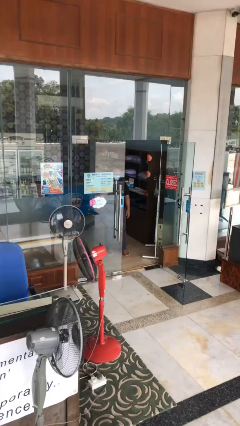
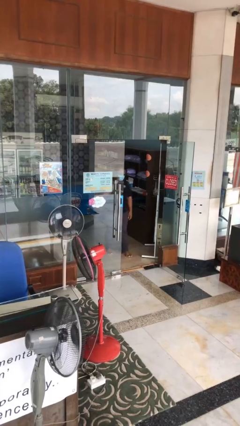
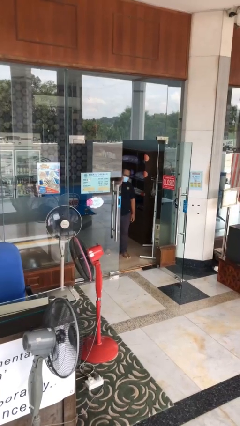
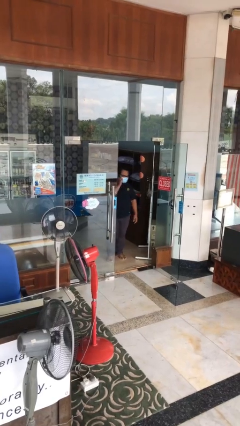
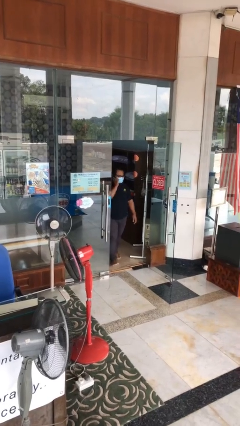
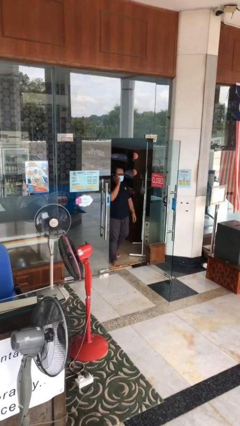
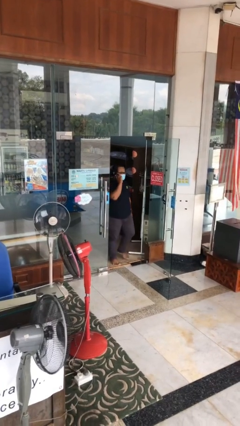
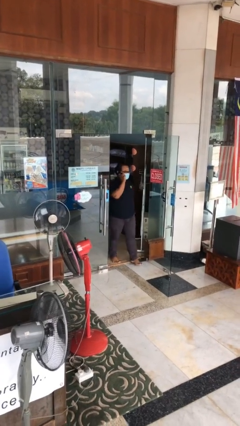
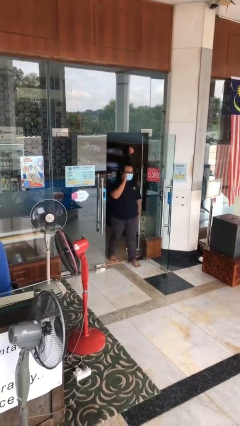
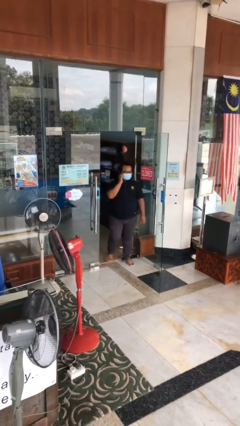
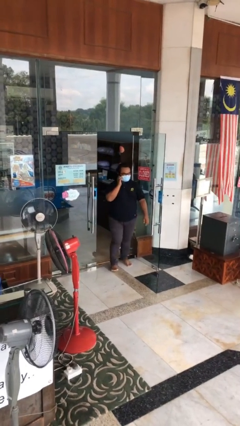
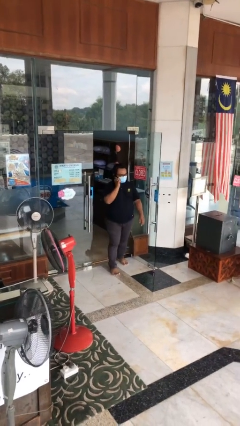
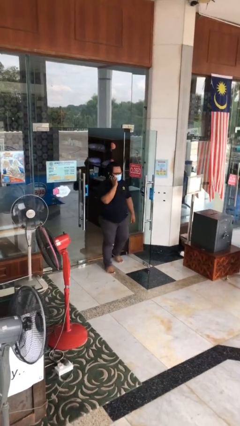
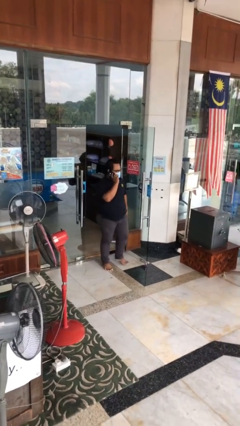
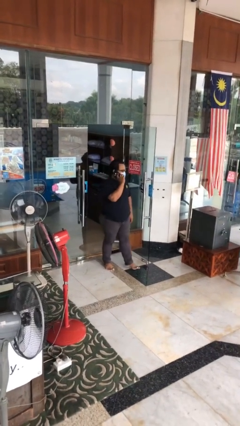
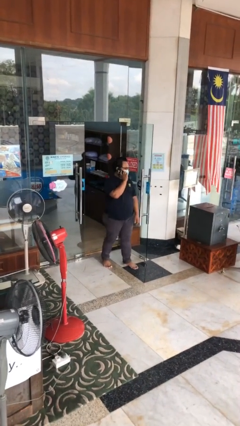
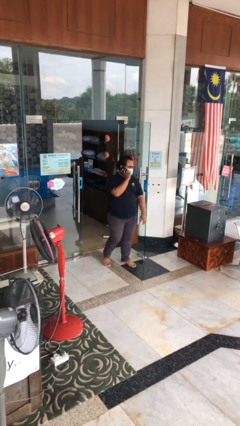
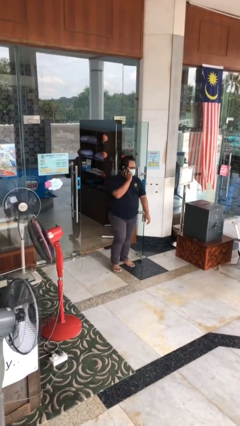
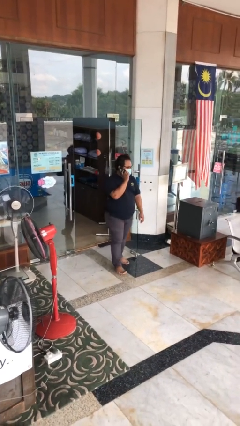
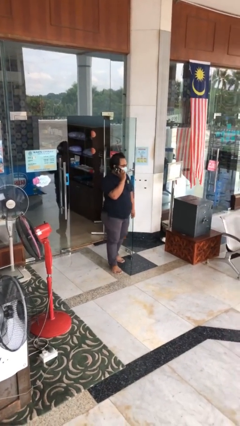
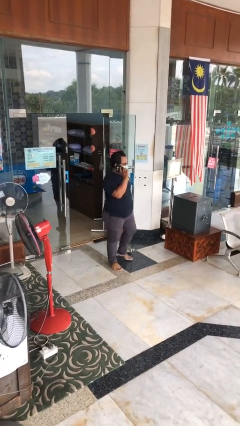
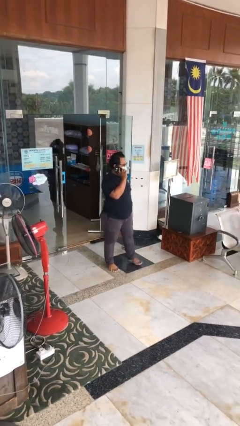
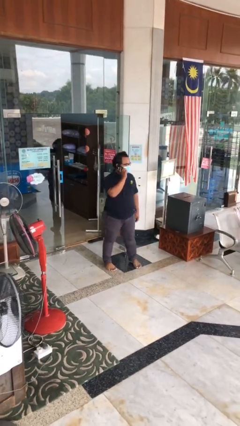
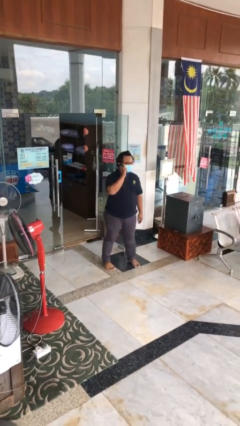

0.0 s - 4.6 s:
person enters scene through structure

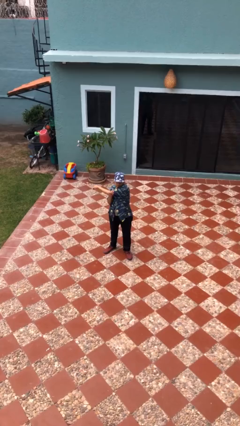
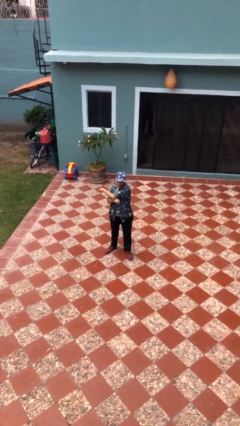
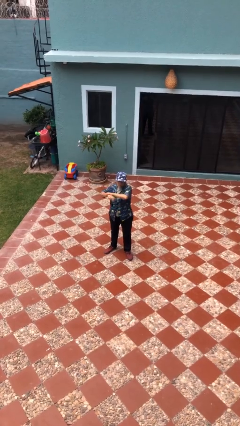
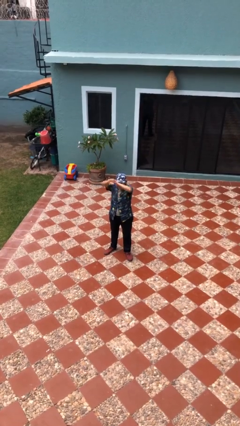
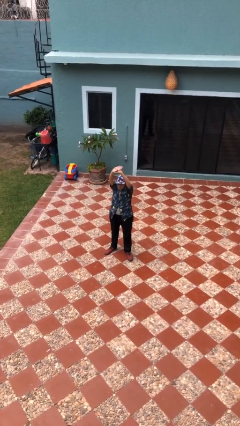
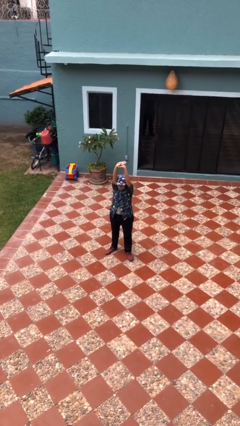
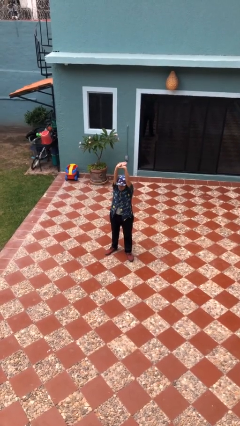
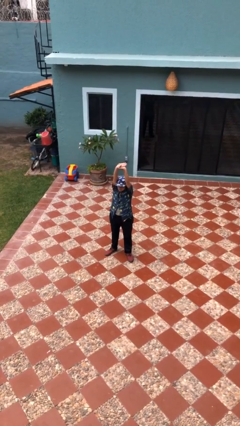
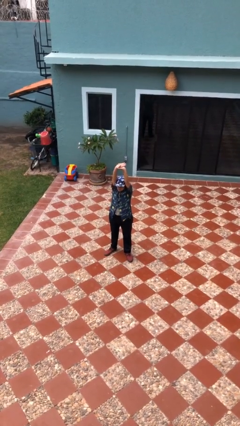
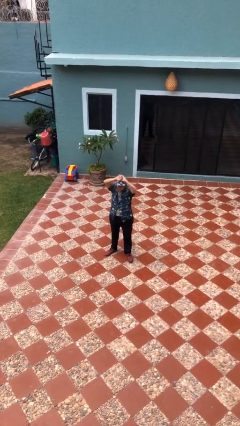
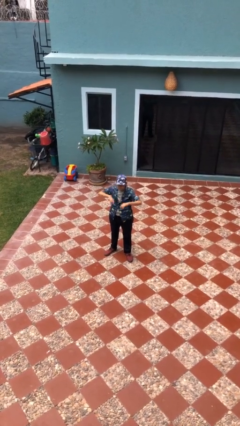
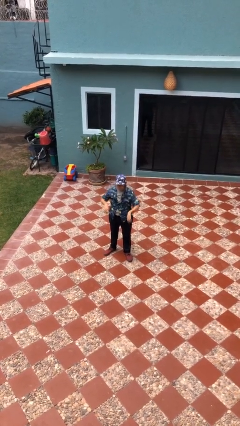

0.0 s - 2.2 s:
person stretches arms over head

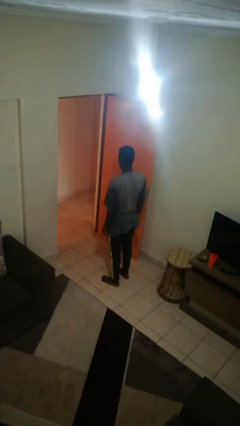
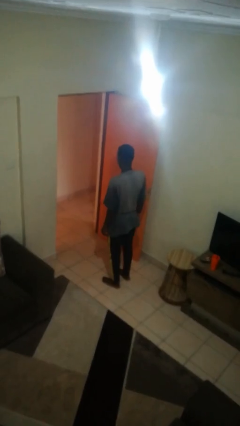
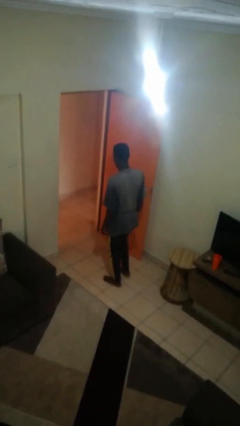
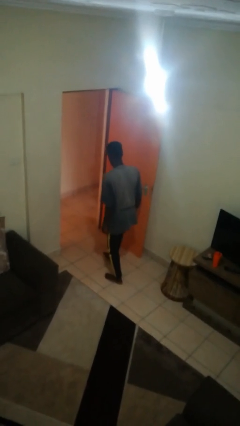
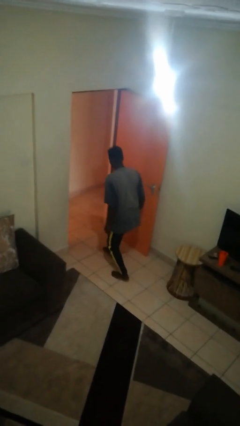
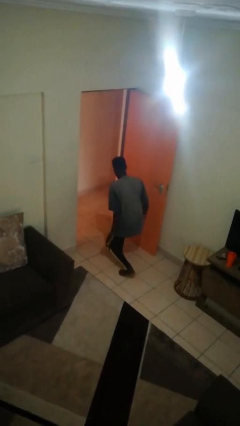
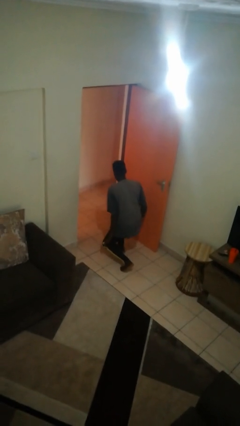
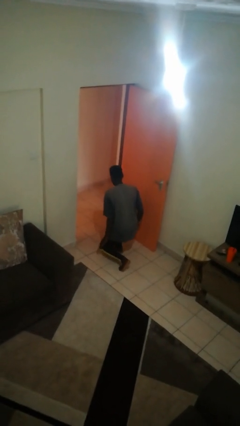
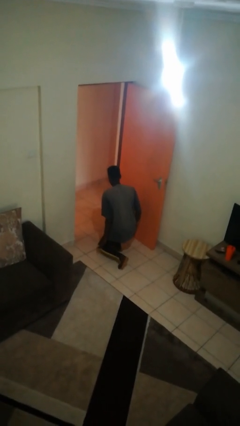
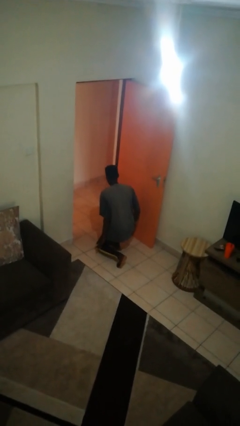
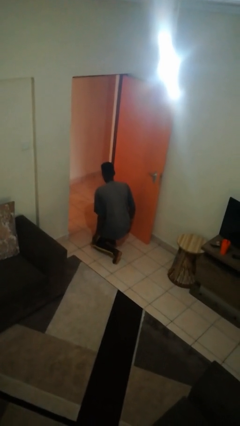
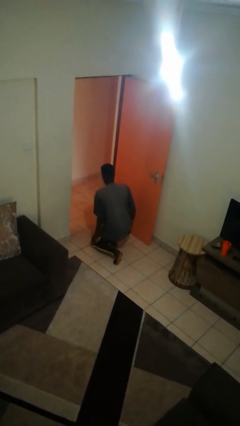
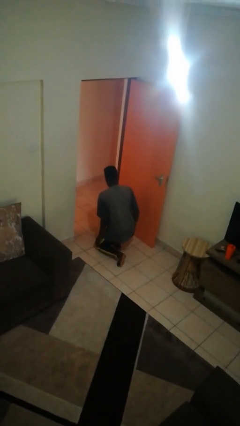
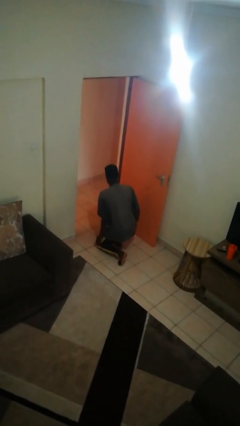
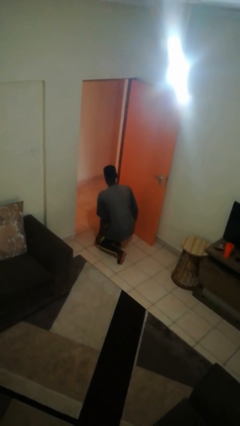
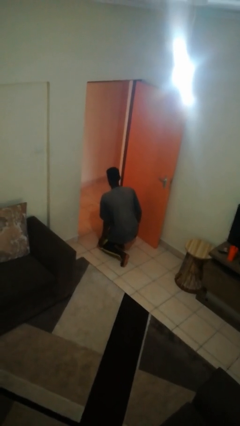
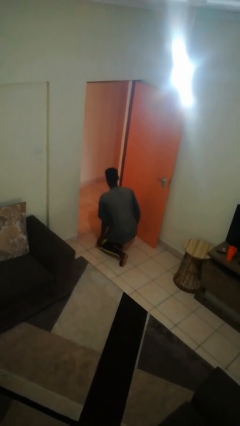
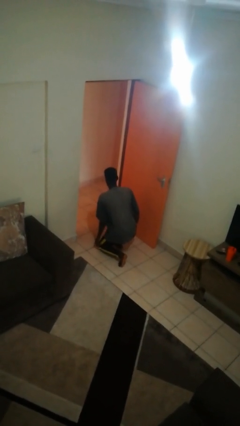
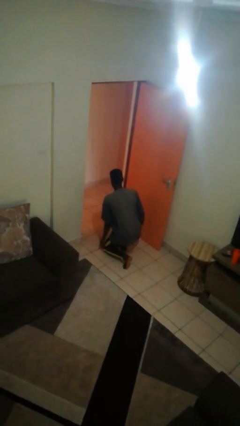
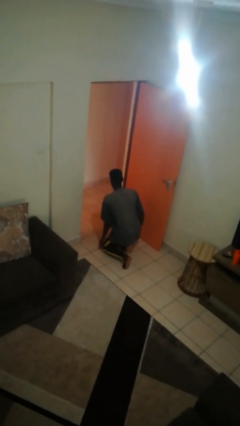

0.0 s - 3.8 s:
person kneels

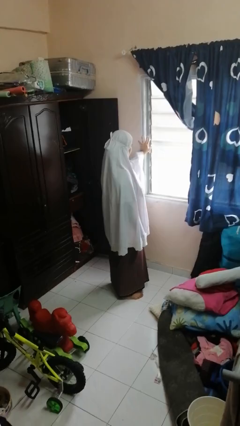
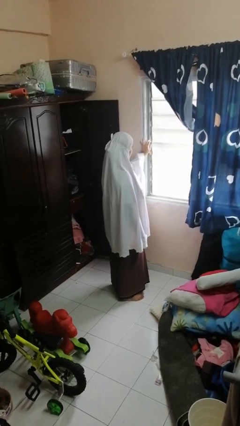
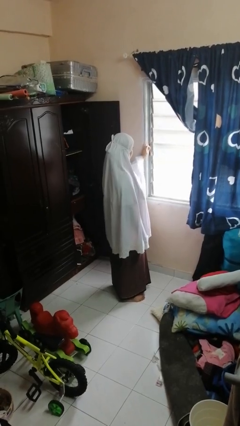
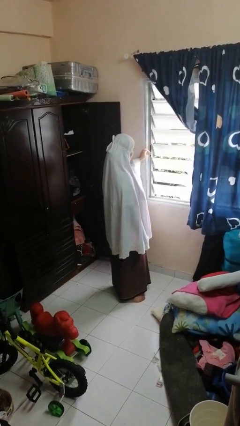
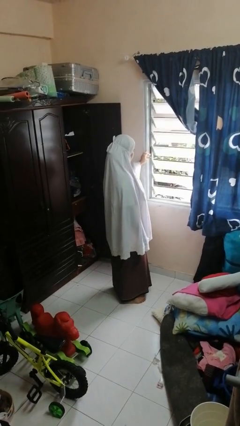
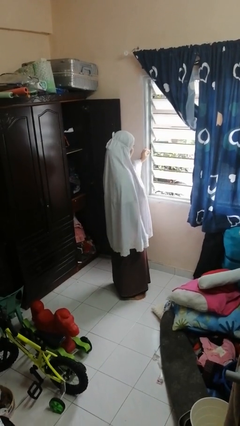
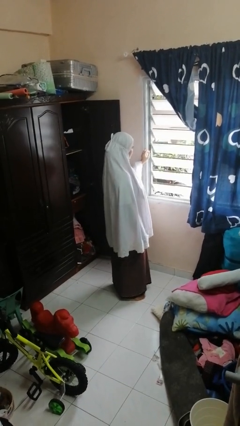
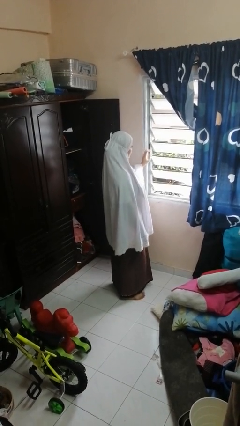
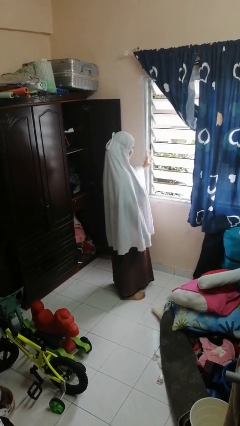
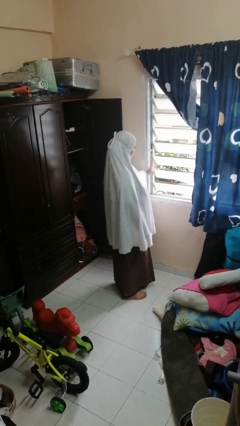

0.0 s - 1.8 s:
person opens home window

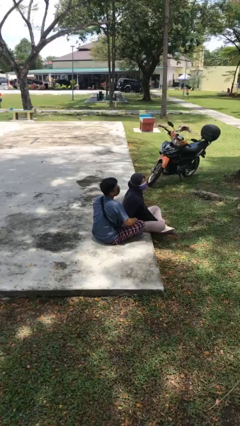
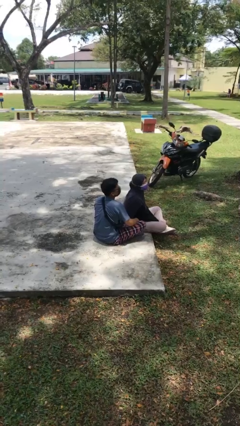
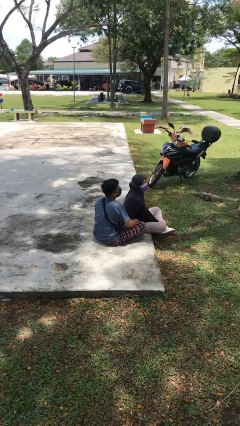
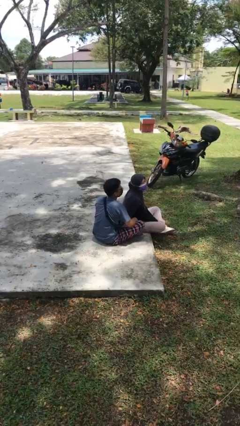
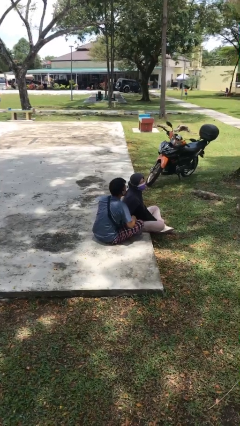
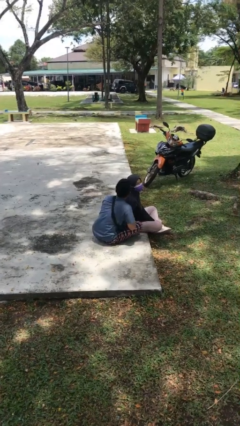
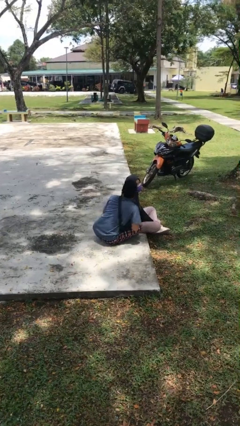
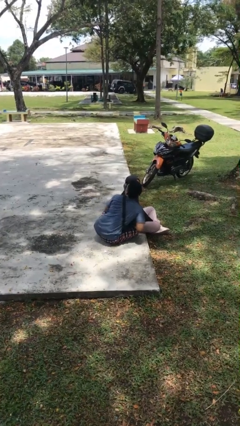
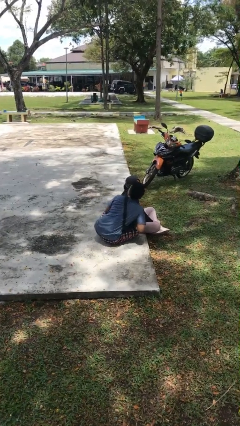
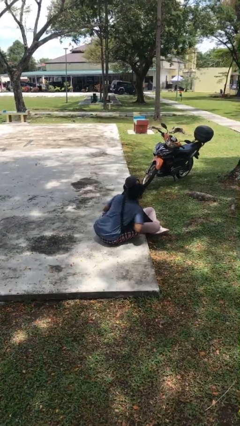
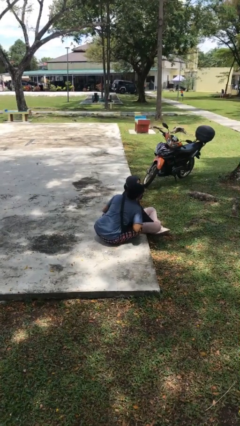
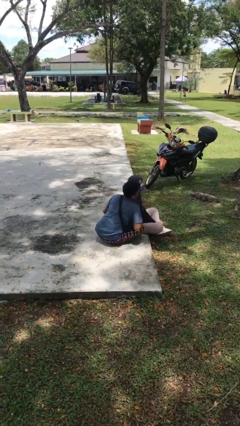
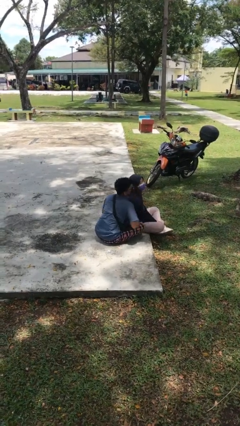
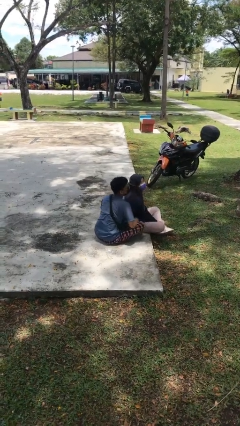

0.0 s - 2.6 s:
person kisses cheek of person

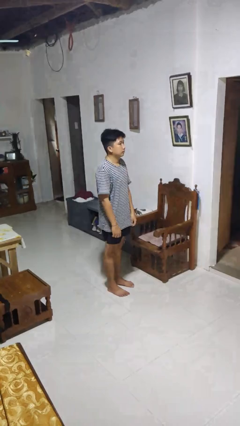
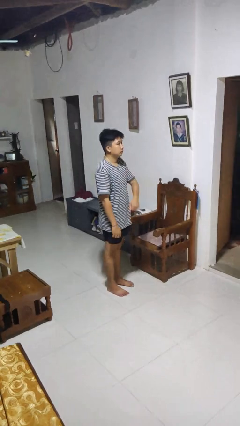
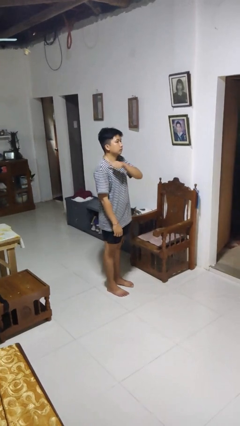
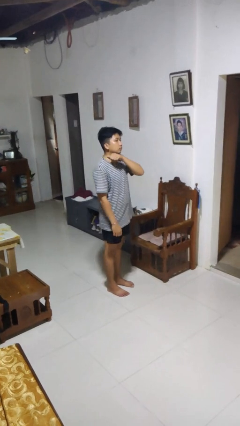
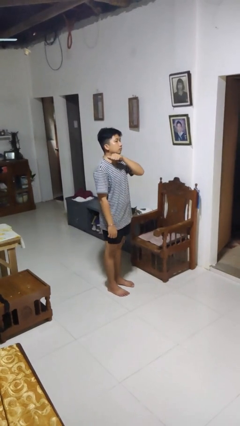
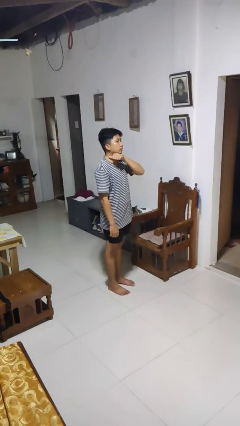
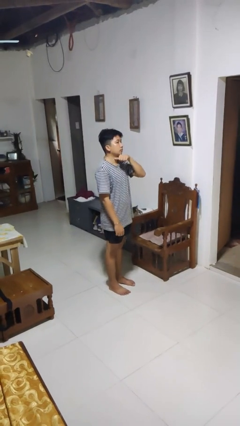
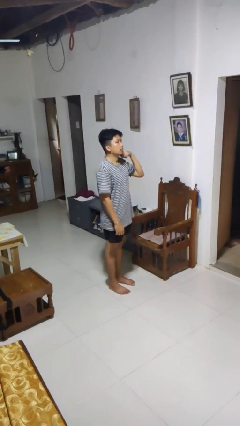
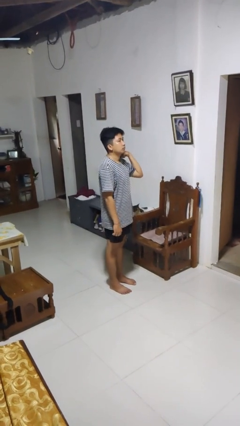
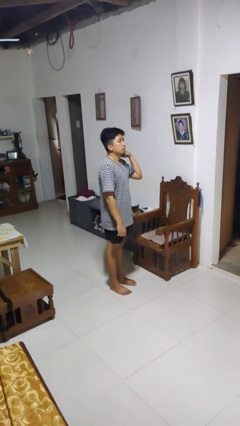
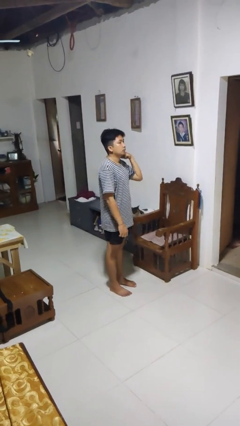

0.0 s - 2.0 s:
person gestures cut

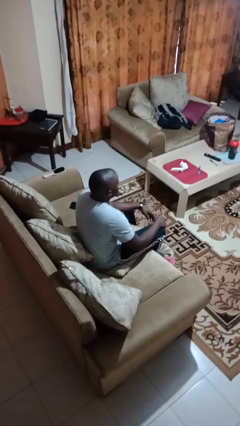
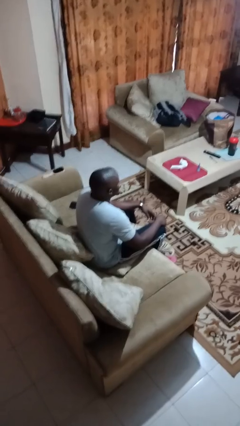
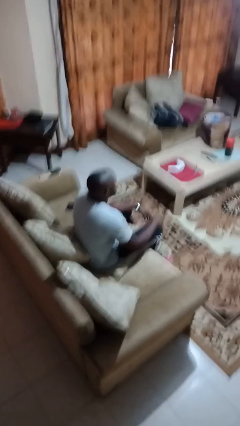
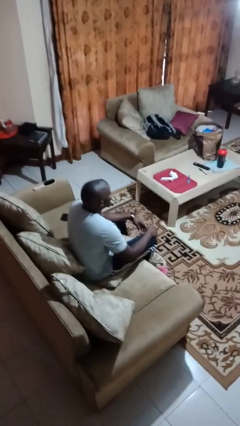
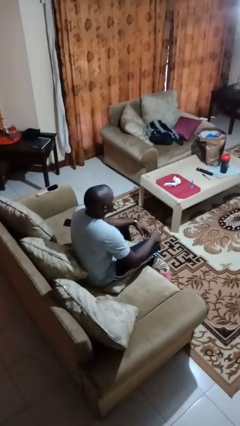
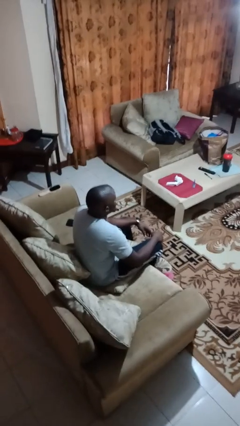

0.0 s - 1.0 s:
person rubs foot
